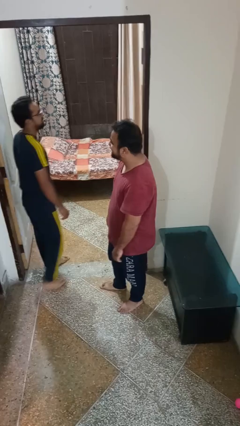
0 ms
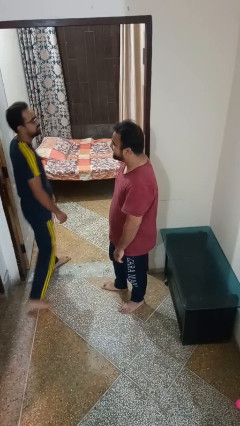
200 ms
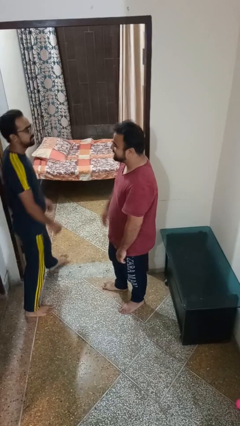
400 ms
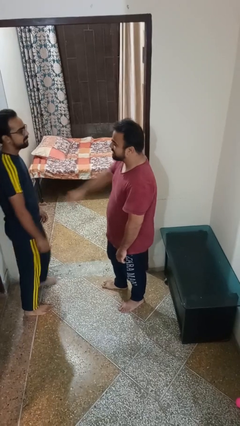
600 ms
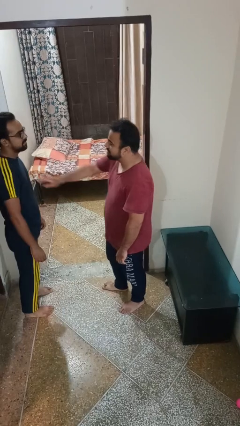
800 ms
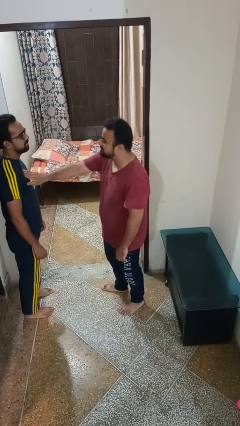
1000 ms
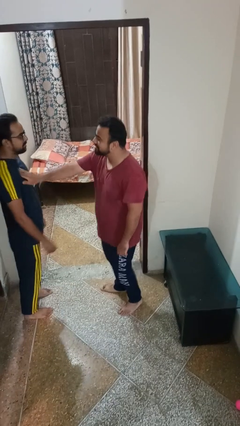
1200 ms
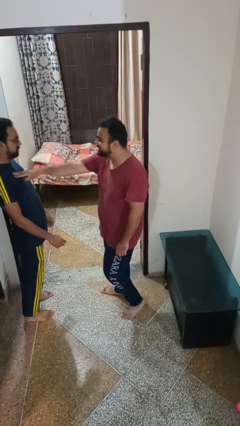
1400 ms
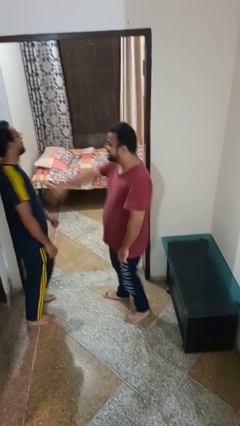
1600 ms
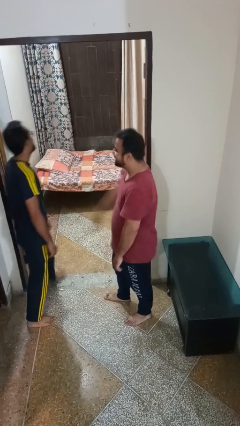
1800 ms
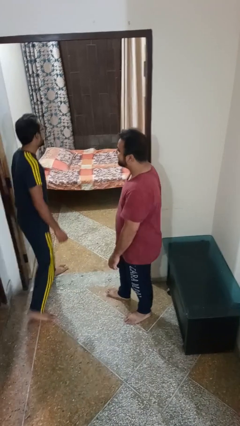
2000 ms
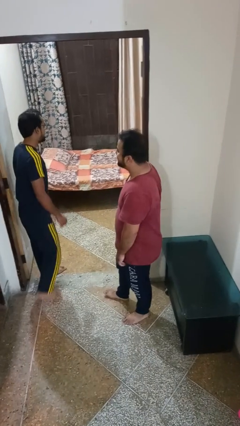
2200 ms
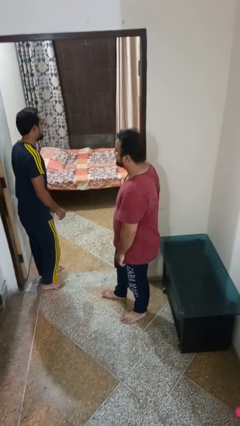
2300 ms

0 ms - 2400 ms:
person shoves person

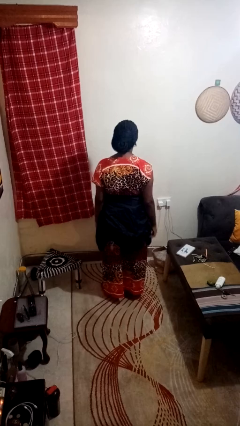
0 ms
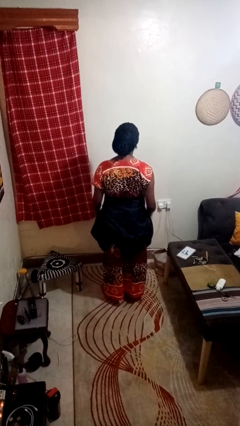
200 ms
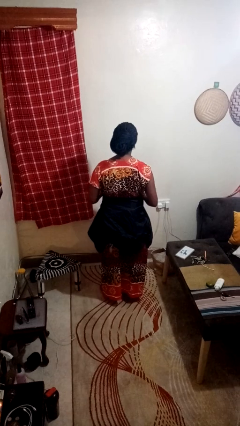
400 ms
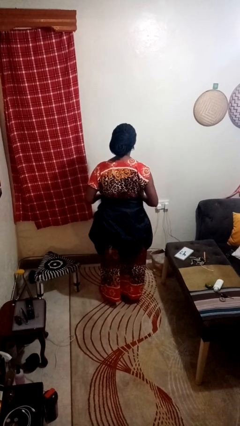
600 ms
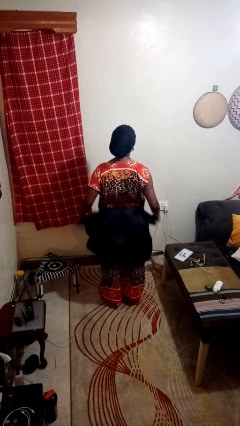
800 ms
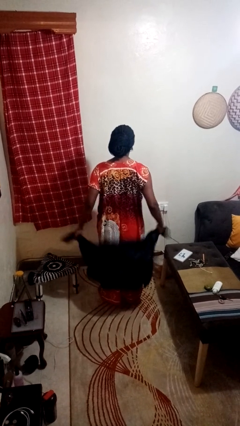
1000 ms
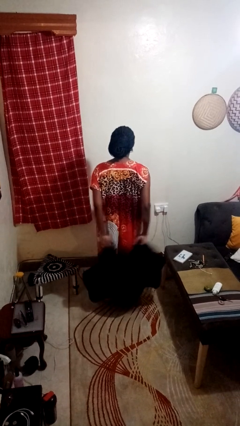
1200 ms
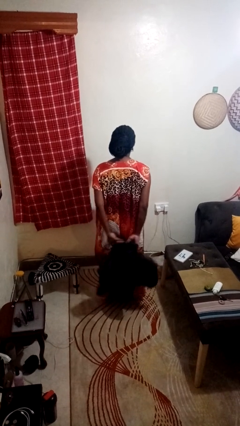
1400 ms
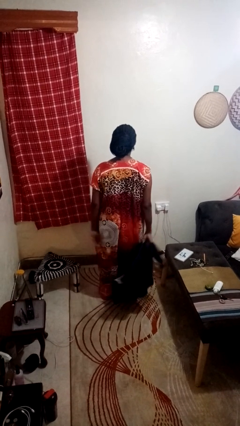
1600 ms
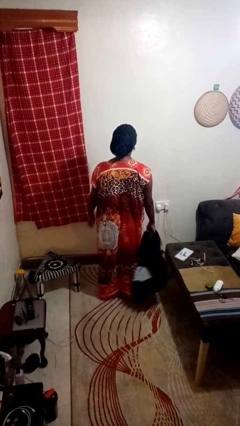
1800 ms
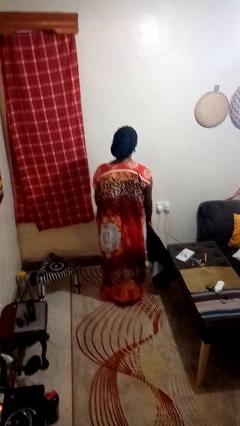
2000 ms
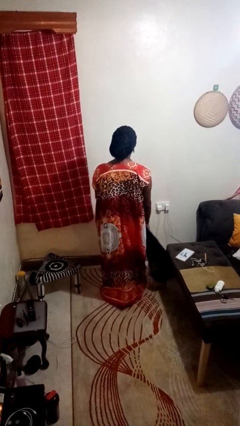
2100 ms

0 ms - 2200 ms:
person unties jacket around waist

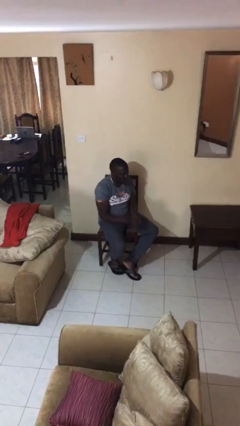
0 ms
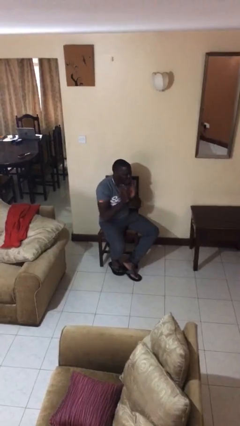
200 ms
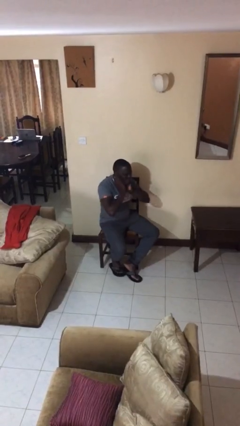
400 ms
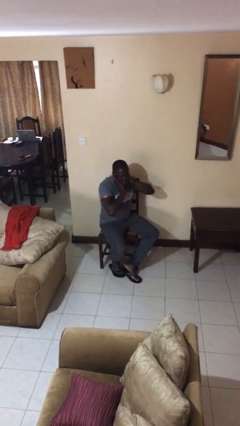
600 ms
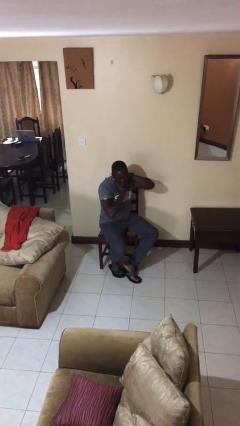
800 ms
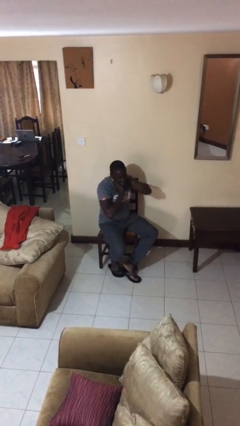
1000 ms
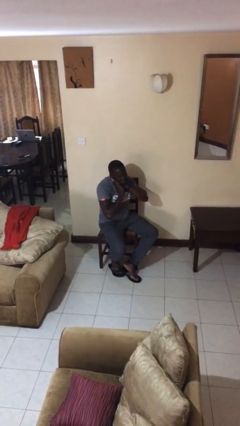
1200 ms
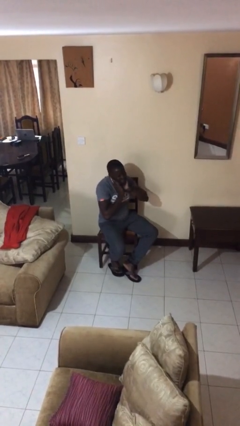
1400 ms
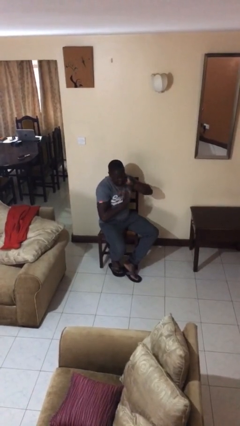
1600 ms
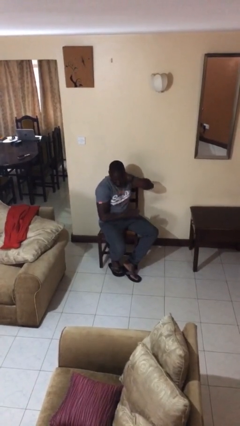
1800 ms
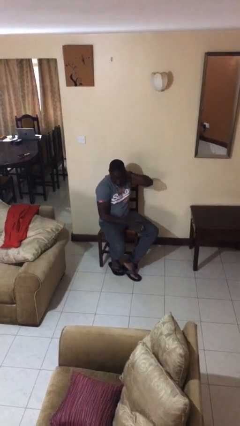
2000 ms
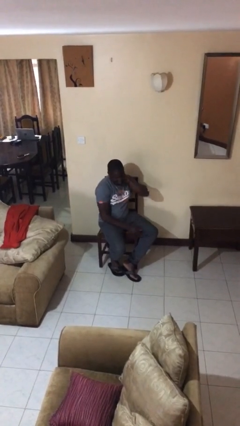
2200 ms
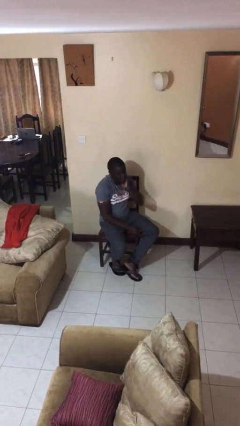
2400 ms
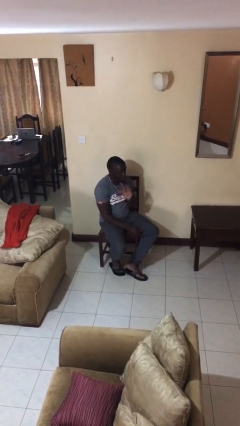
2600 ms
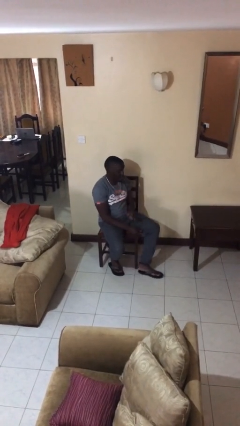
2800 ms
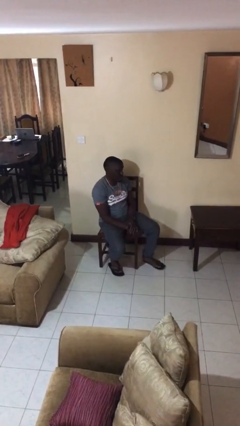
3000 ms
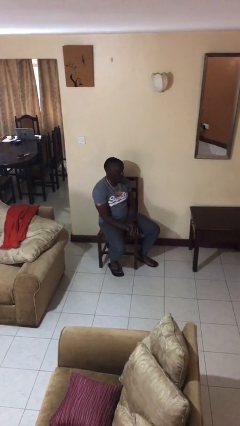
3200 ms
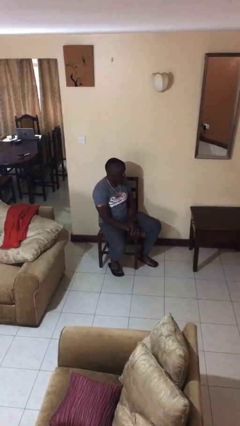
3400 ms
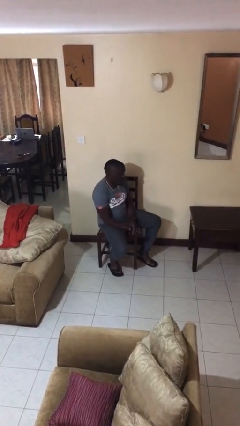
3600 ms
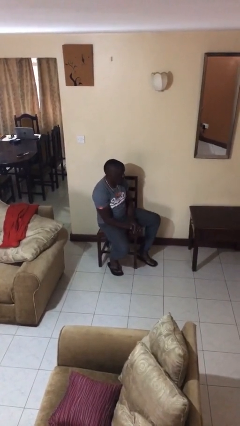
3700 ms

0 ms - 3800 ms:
person rubs neck

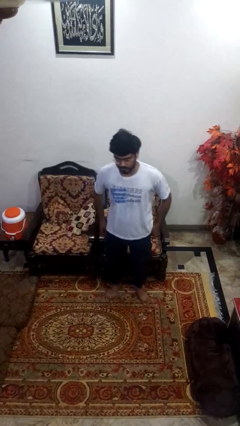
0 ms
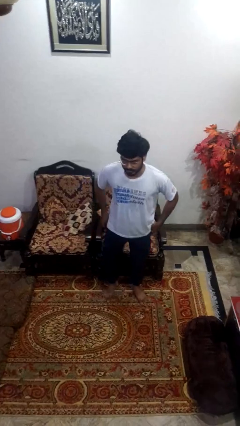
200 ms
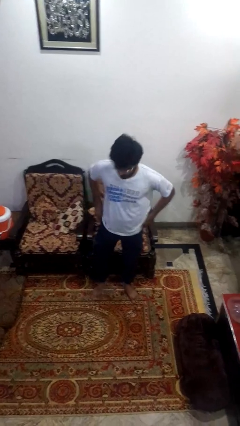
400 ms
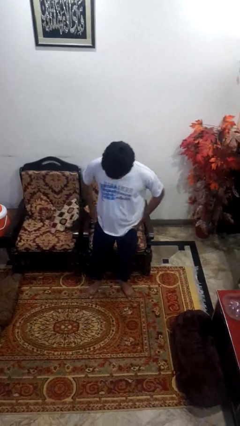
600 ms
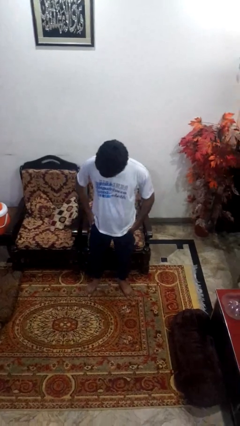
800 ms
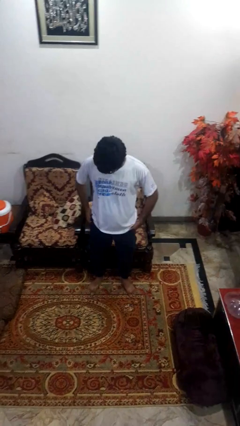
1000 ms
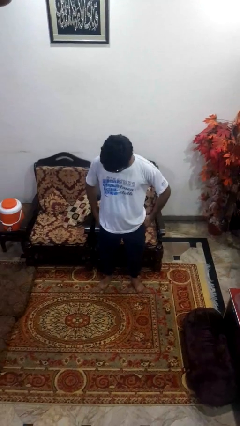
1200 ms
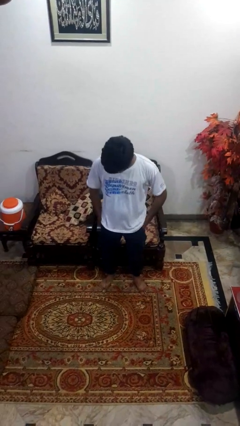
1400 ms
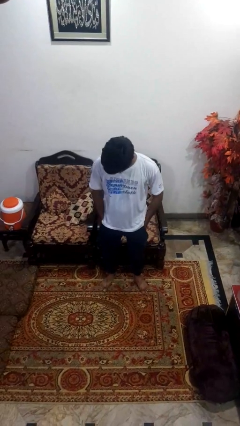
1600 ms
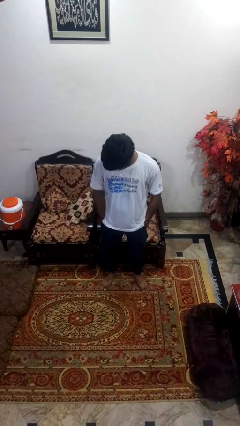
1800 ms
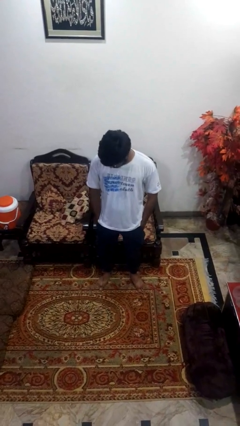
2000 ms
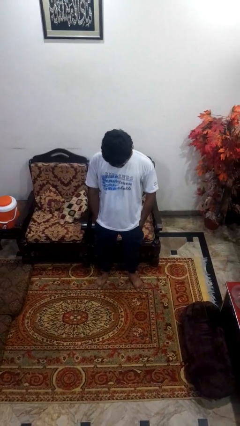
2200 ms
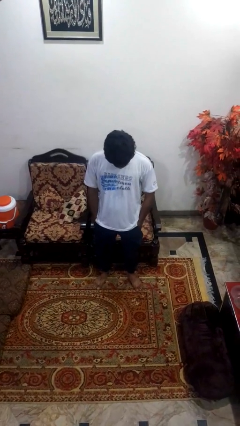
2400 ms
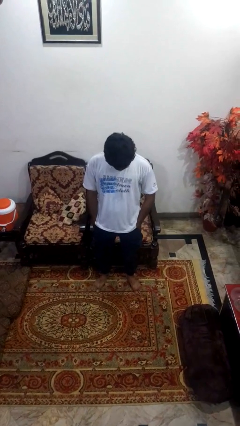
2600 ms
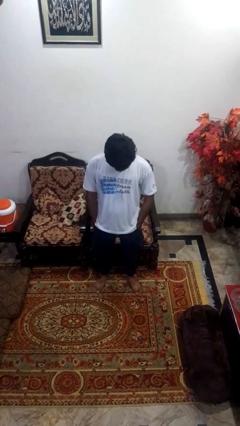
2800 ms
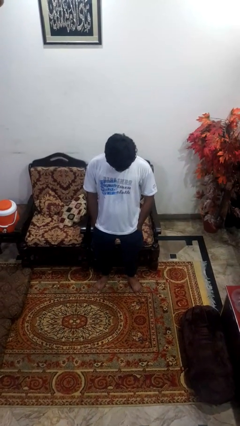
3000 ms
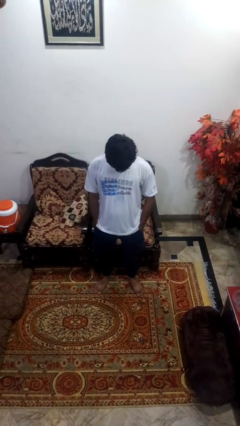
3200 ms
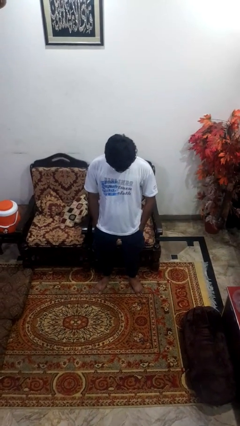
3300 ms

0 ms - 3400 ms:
person puts hands in back pockets

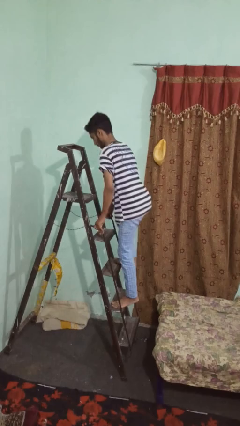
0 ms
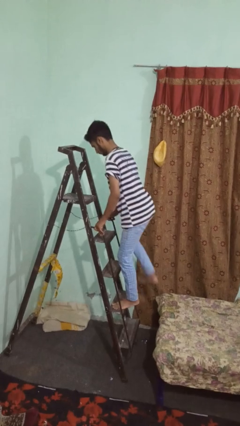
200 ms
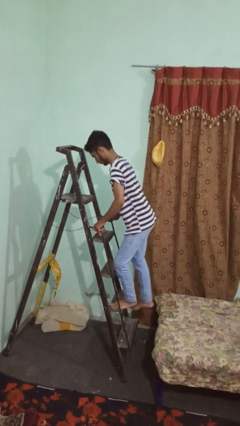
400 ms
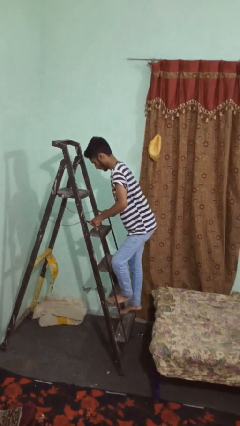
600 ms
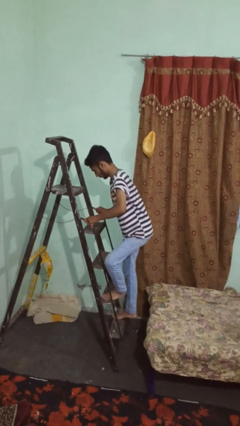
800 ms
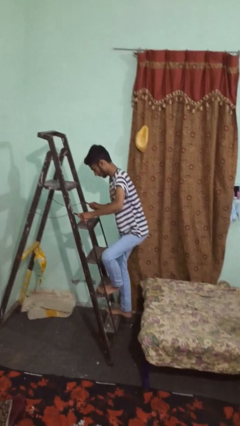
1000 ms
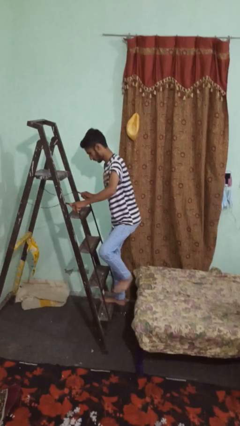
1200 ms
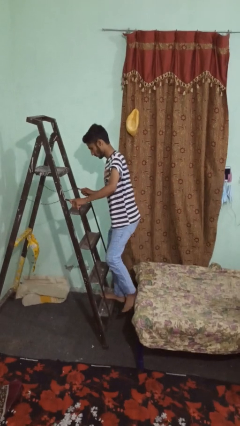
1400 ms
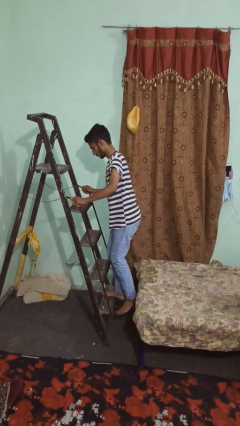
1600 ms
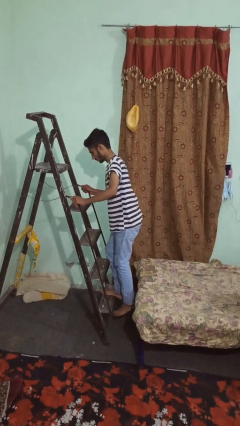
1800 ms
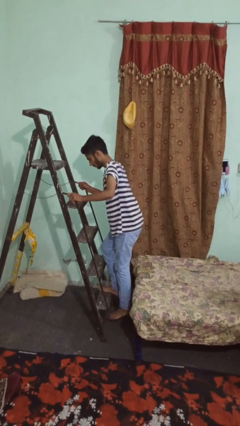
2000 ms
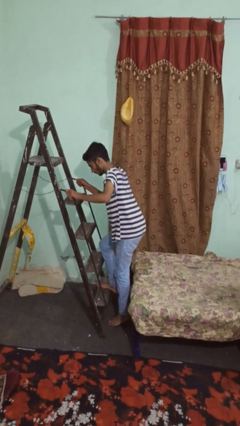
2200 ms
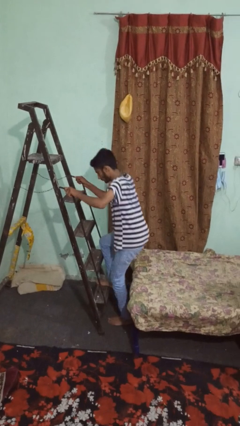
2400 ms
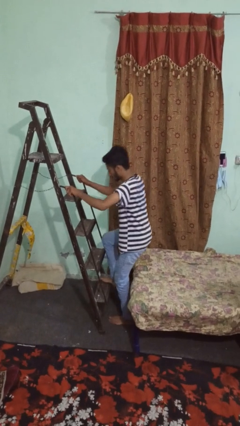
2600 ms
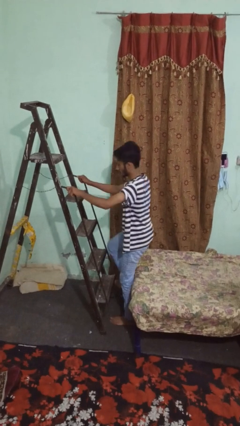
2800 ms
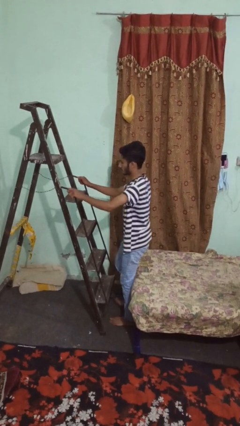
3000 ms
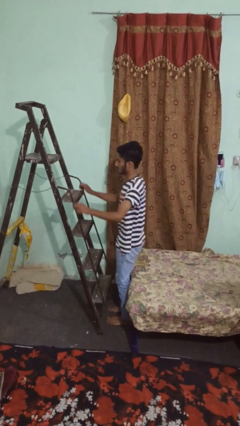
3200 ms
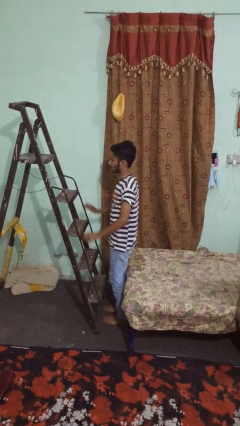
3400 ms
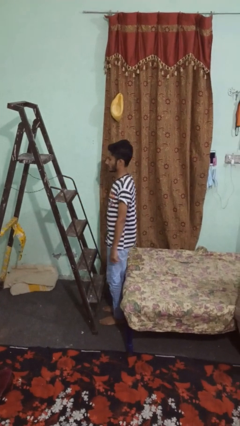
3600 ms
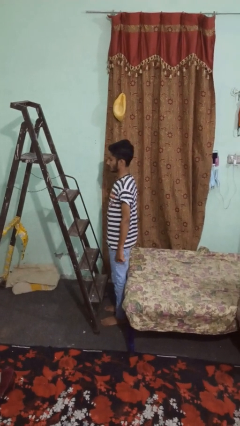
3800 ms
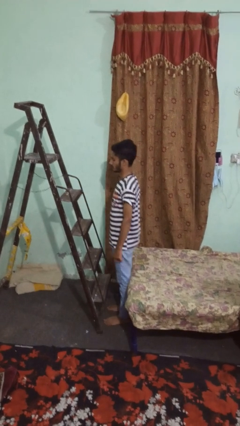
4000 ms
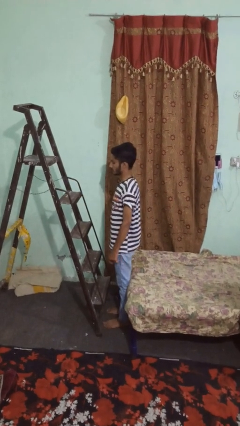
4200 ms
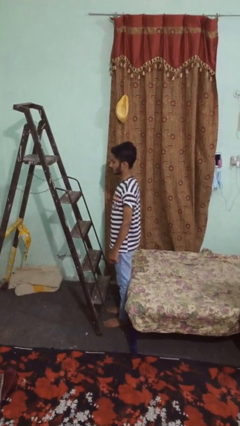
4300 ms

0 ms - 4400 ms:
person climbs down ladder

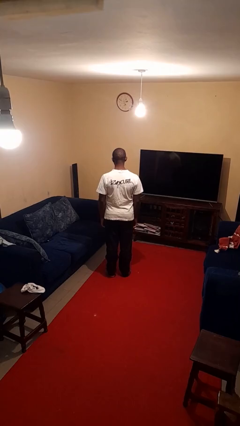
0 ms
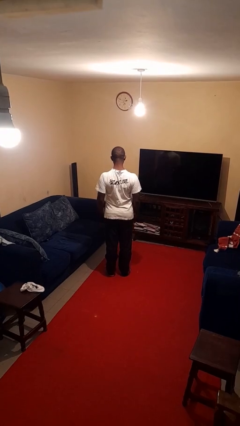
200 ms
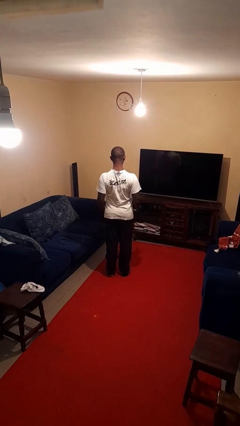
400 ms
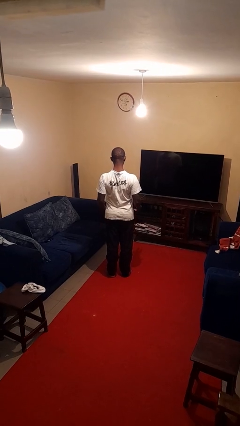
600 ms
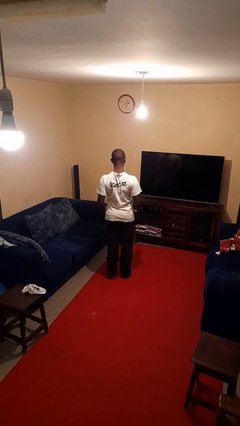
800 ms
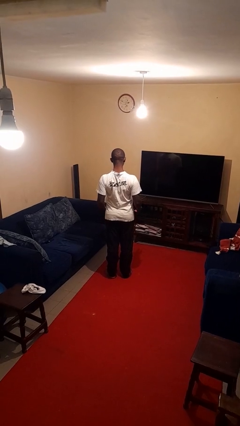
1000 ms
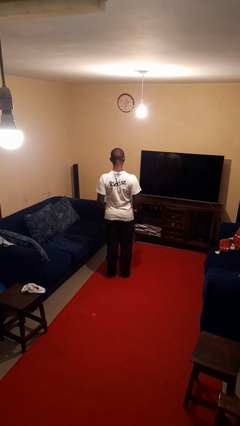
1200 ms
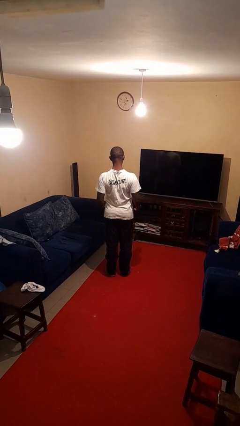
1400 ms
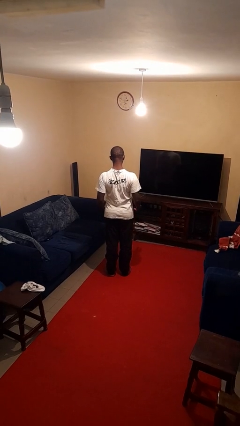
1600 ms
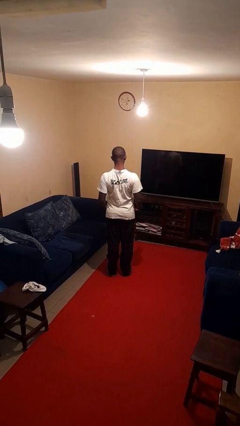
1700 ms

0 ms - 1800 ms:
person shrugs
